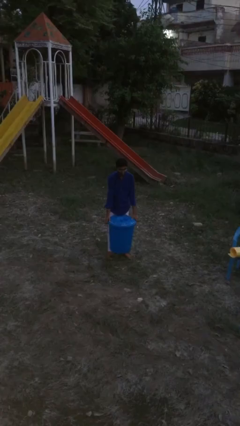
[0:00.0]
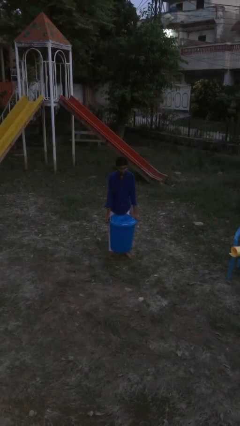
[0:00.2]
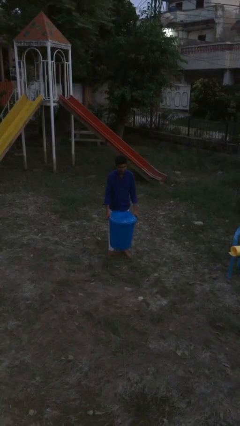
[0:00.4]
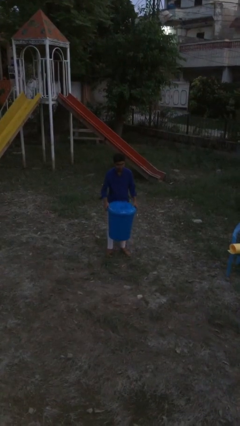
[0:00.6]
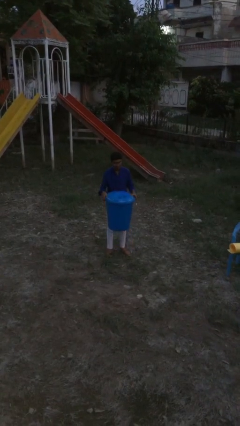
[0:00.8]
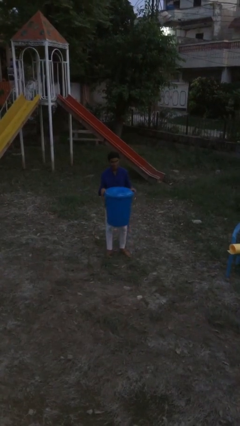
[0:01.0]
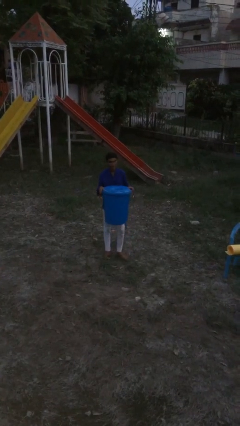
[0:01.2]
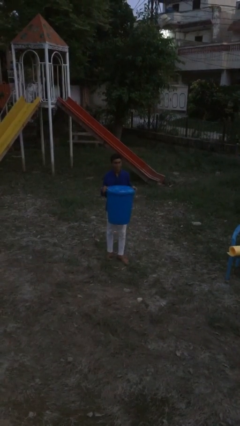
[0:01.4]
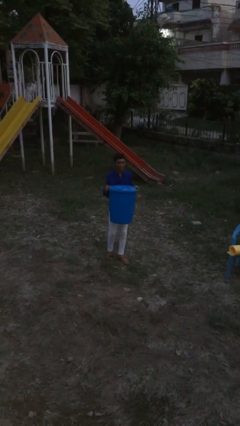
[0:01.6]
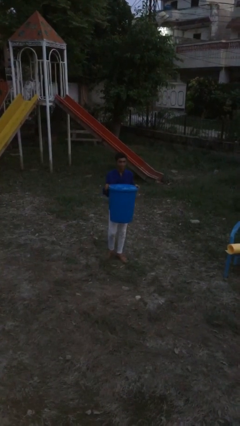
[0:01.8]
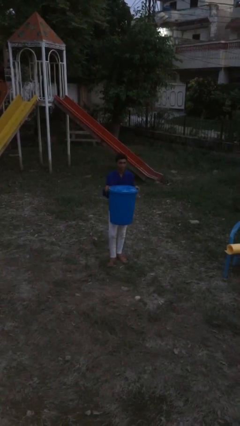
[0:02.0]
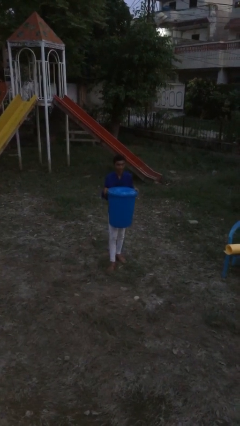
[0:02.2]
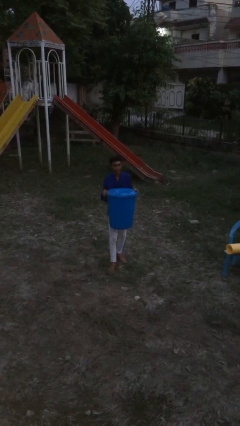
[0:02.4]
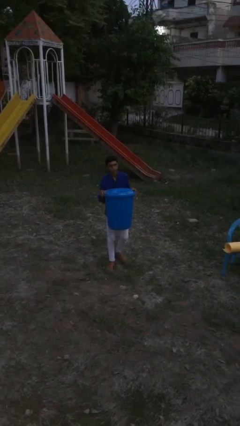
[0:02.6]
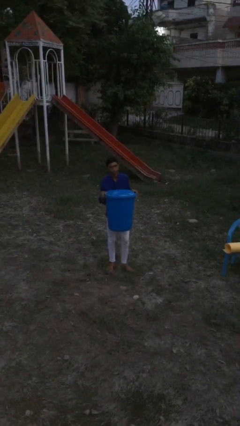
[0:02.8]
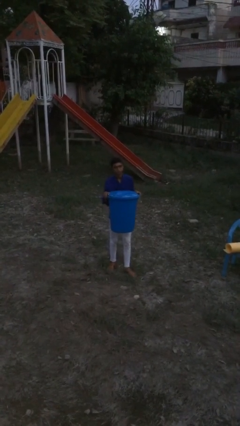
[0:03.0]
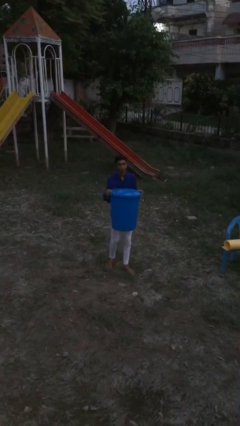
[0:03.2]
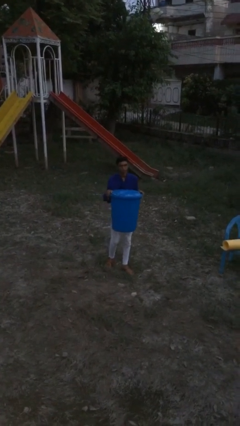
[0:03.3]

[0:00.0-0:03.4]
person carries heavy object

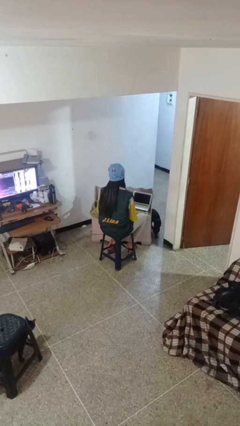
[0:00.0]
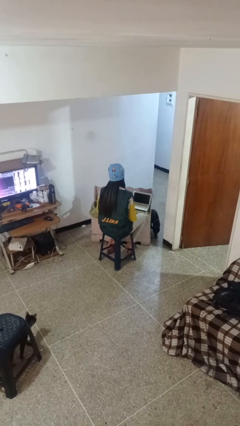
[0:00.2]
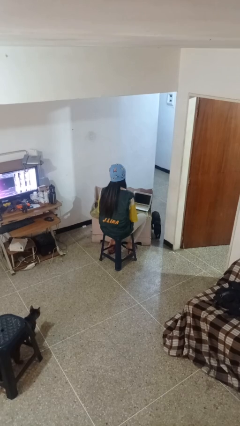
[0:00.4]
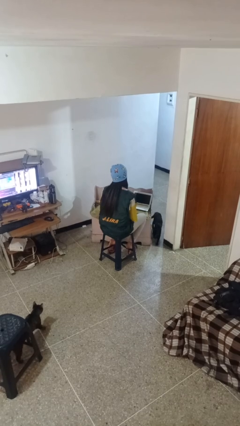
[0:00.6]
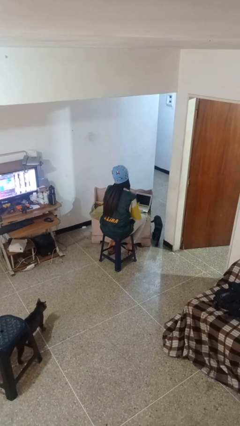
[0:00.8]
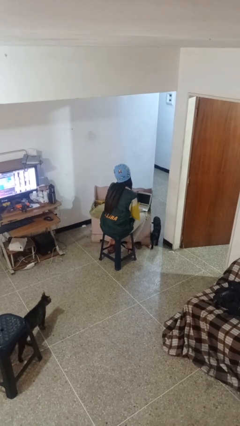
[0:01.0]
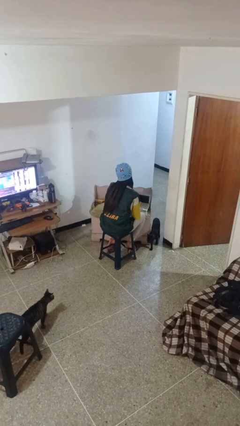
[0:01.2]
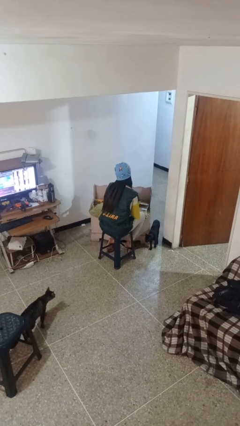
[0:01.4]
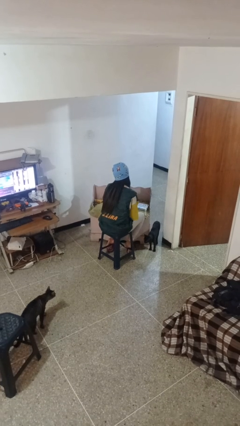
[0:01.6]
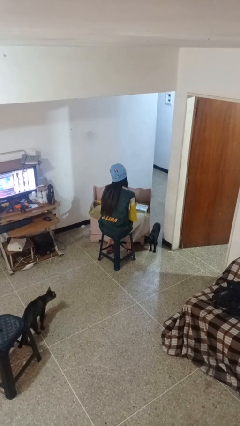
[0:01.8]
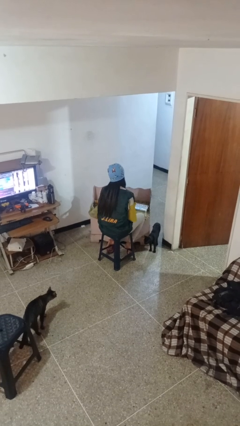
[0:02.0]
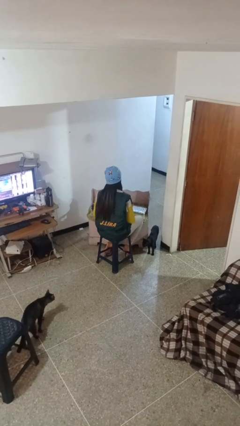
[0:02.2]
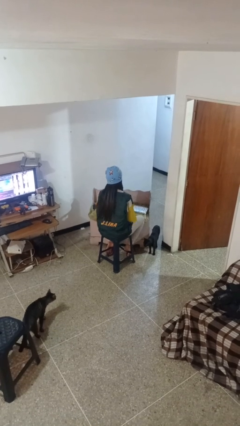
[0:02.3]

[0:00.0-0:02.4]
person closes laptop

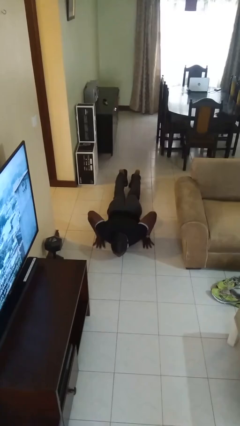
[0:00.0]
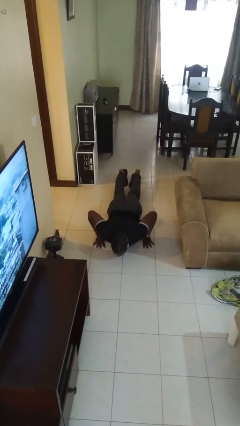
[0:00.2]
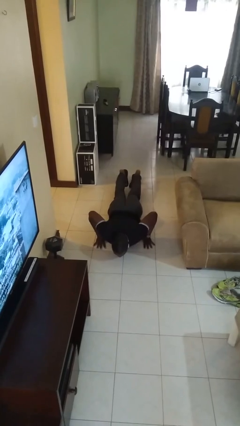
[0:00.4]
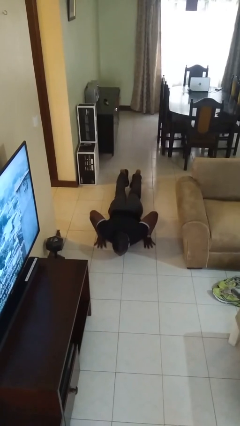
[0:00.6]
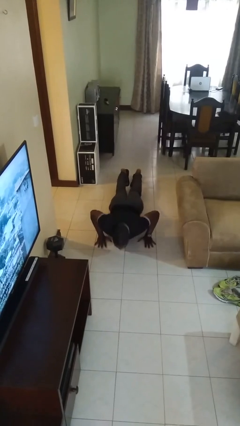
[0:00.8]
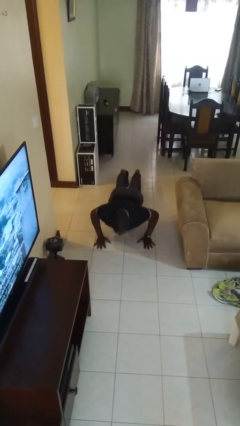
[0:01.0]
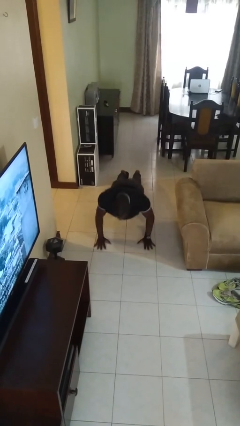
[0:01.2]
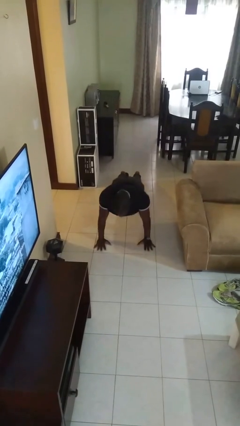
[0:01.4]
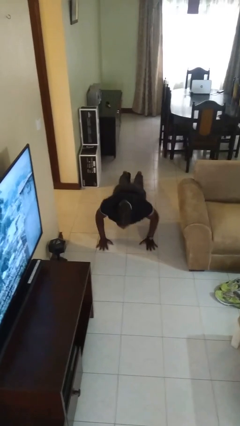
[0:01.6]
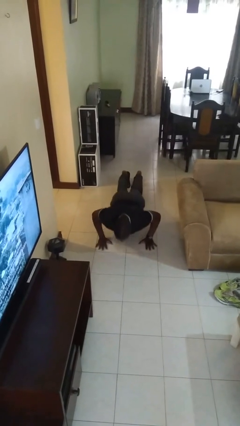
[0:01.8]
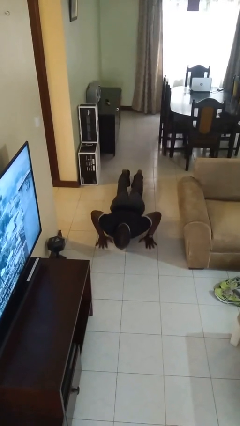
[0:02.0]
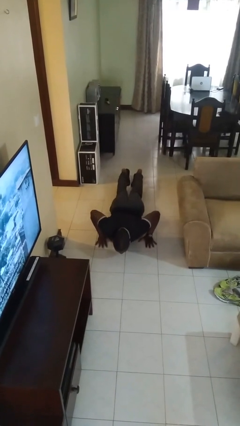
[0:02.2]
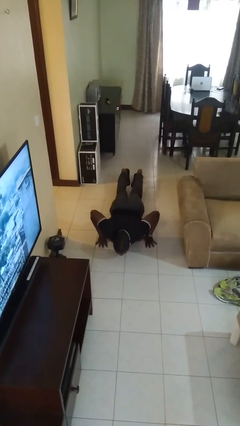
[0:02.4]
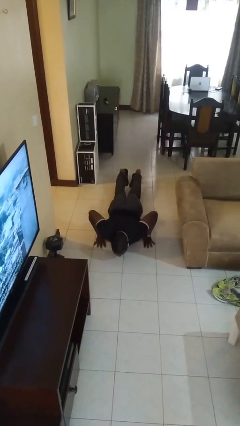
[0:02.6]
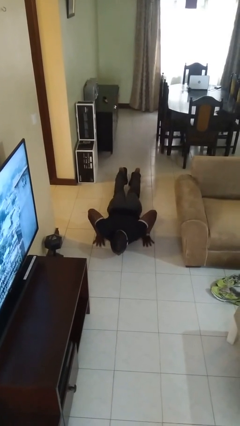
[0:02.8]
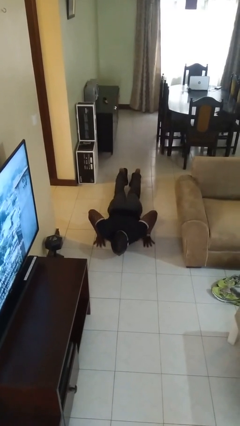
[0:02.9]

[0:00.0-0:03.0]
person exercises with pushup

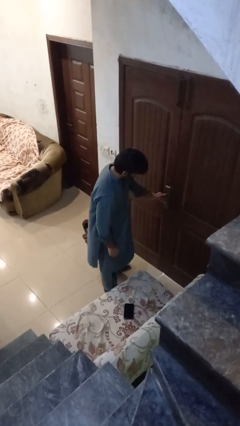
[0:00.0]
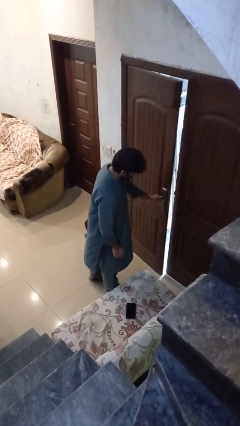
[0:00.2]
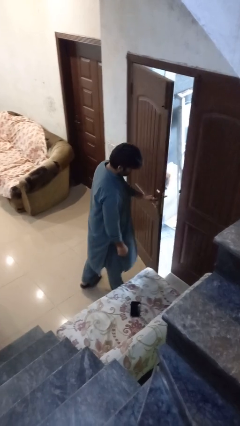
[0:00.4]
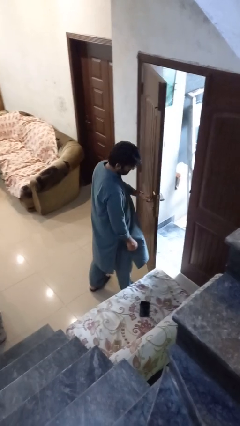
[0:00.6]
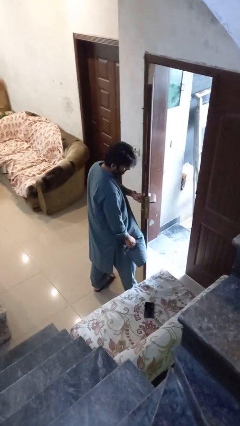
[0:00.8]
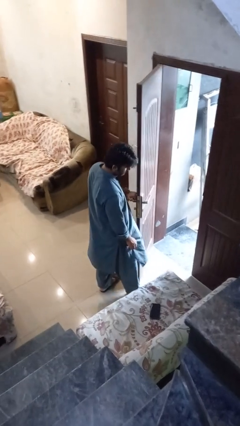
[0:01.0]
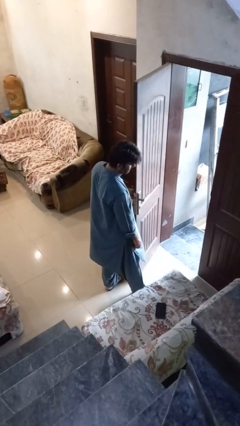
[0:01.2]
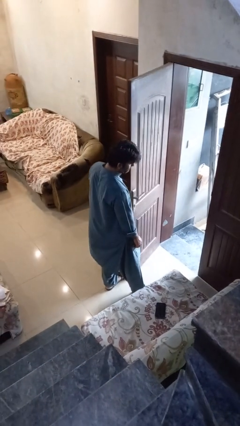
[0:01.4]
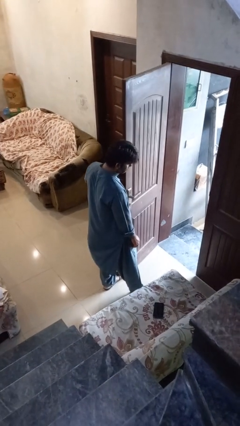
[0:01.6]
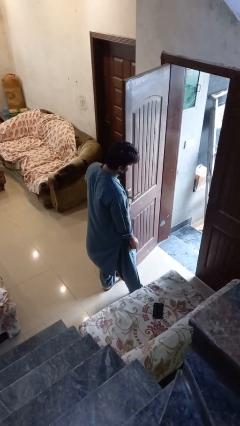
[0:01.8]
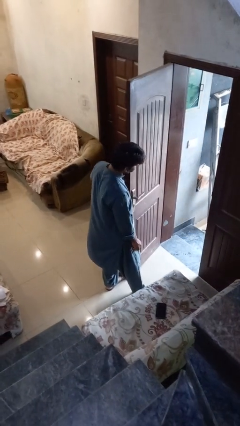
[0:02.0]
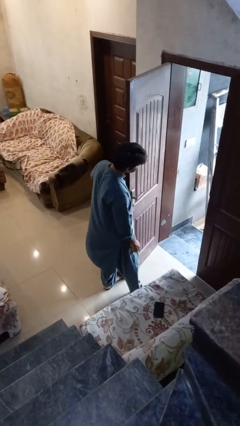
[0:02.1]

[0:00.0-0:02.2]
person opens facility door

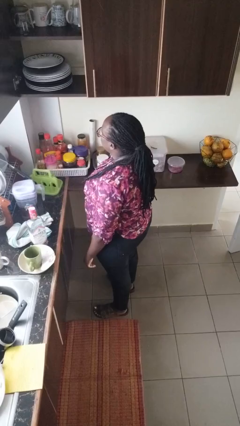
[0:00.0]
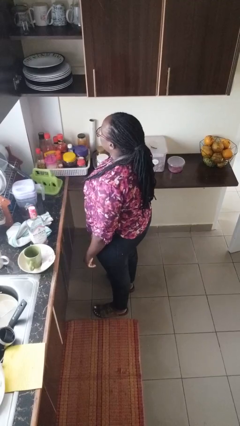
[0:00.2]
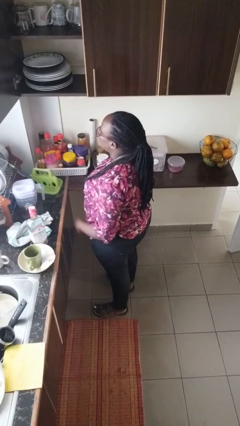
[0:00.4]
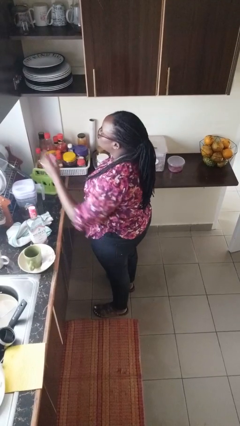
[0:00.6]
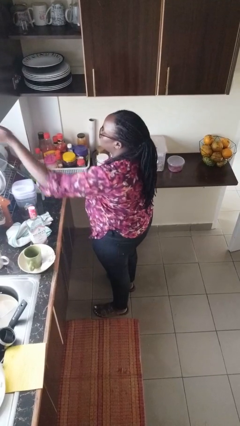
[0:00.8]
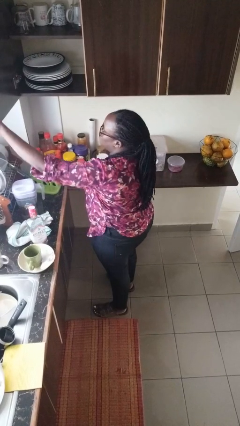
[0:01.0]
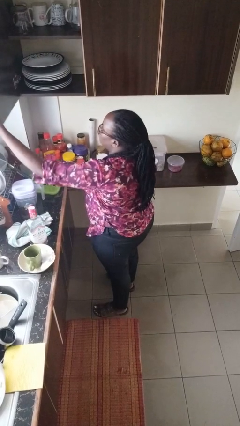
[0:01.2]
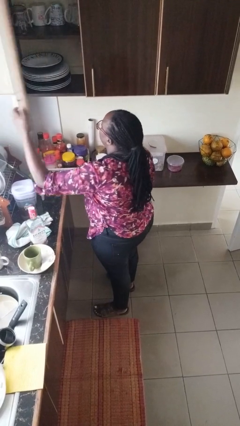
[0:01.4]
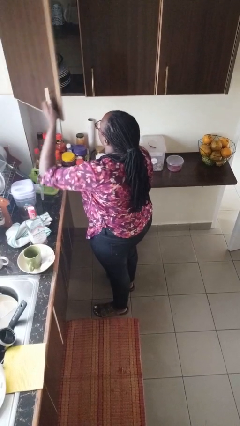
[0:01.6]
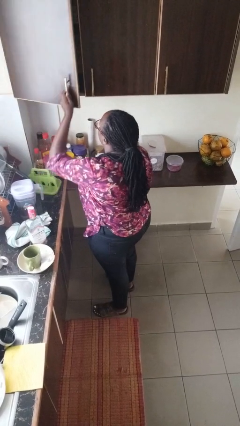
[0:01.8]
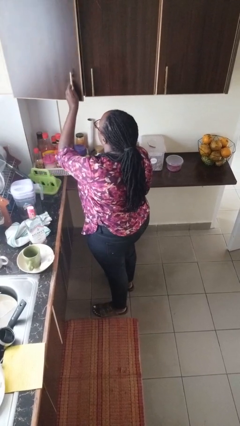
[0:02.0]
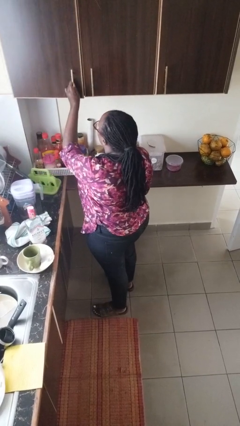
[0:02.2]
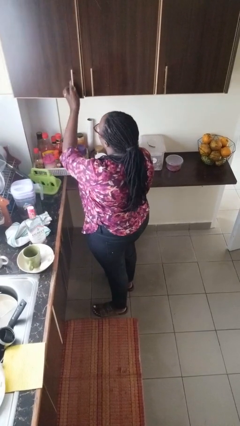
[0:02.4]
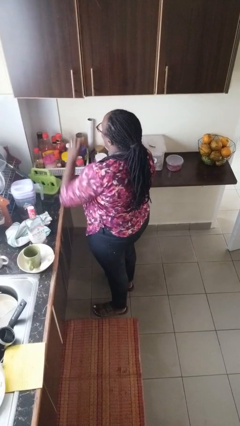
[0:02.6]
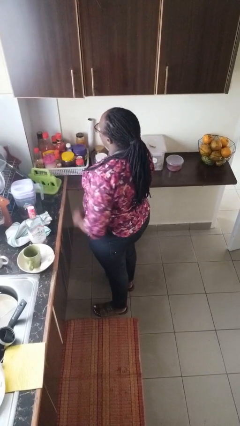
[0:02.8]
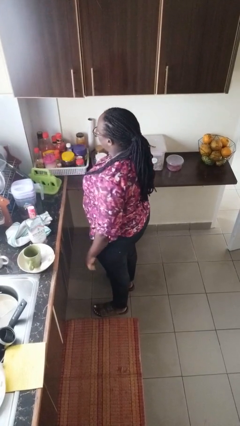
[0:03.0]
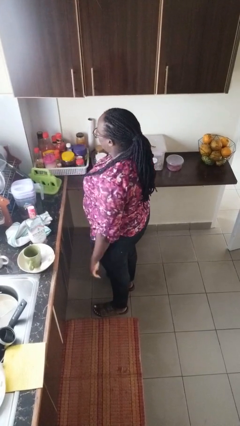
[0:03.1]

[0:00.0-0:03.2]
person closes cabinet

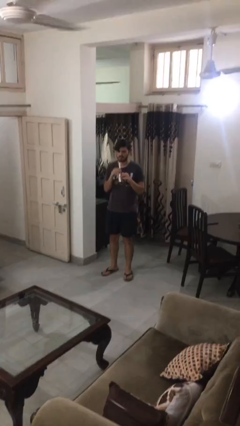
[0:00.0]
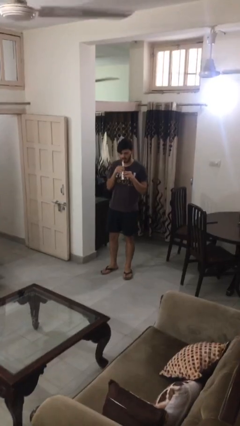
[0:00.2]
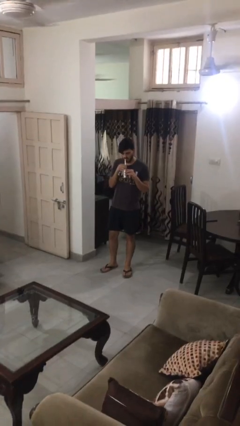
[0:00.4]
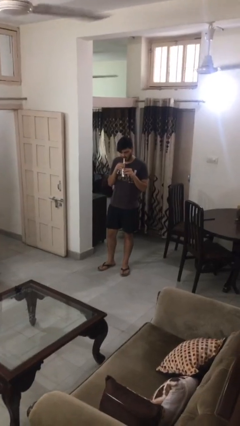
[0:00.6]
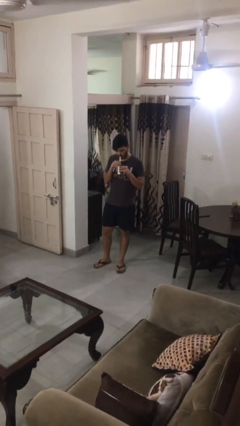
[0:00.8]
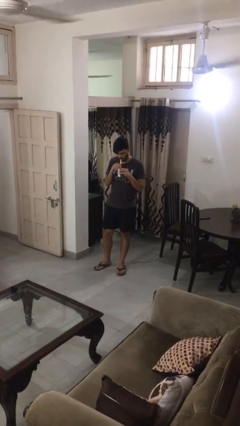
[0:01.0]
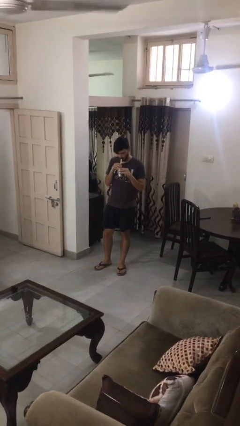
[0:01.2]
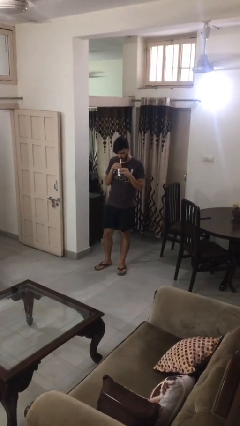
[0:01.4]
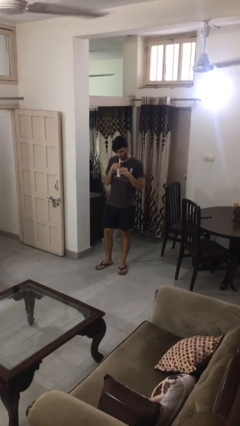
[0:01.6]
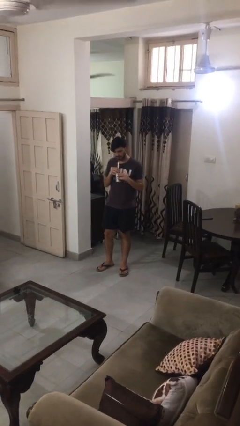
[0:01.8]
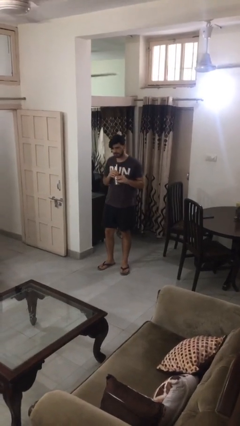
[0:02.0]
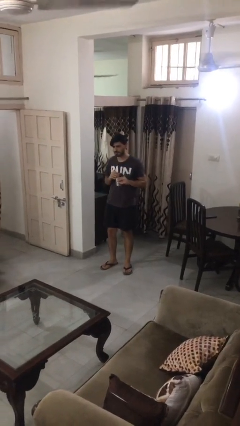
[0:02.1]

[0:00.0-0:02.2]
person drinks from straw

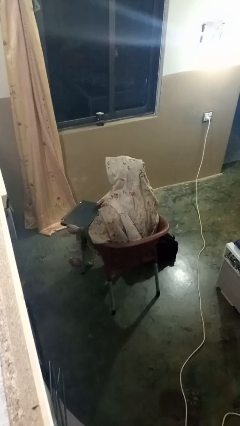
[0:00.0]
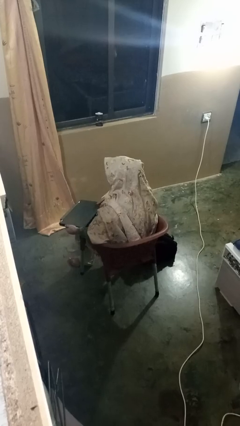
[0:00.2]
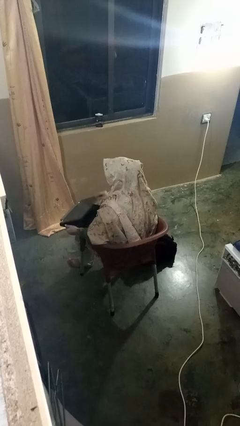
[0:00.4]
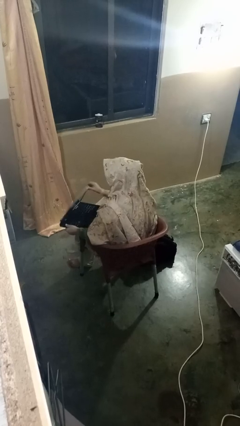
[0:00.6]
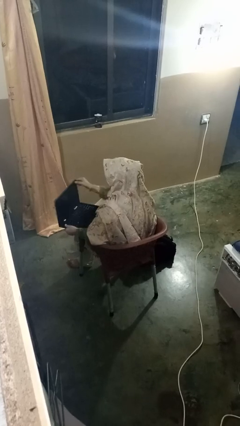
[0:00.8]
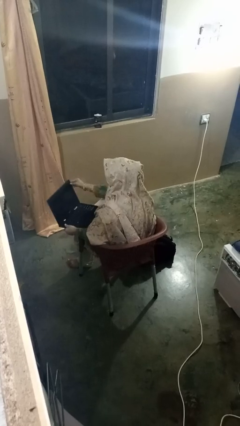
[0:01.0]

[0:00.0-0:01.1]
person opens laptop
